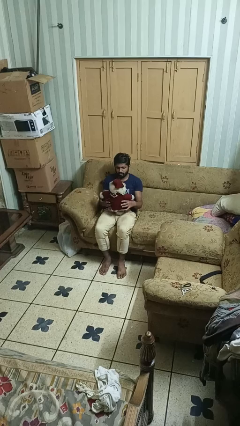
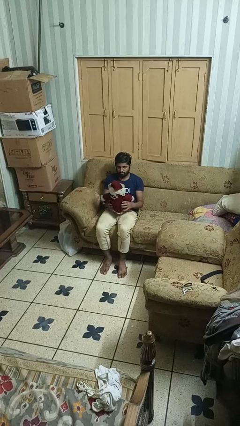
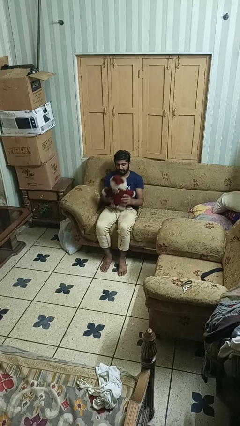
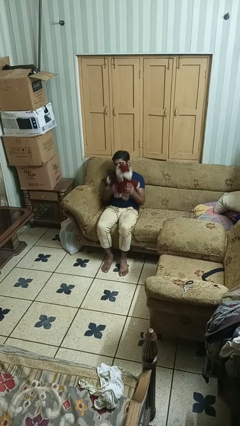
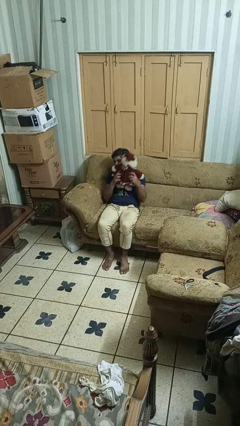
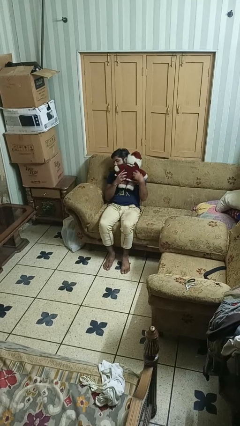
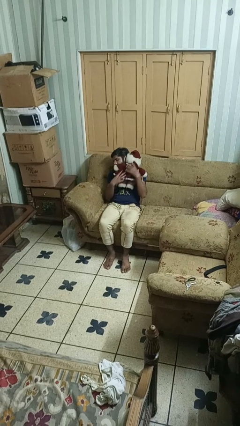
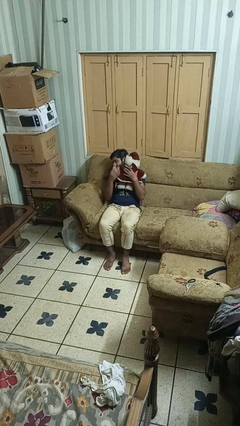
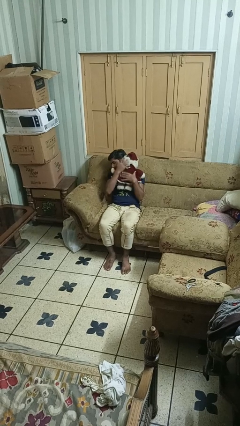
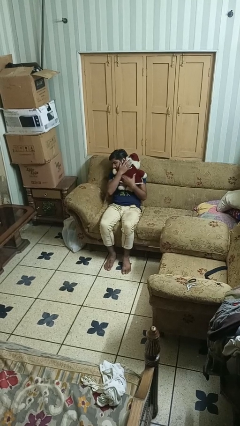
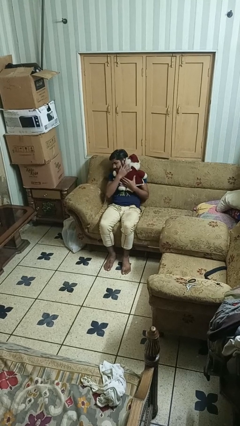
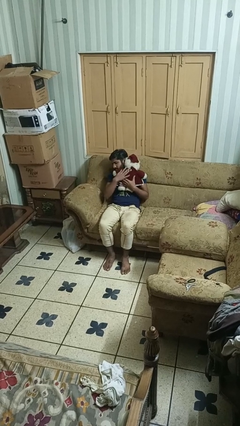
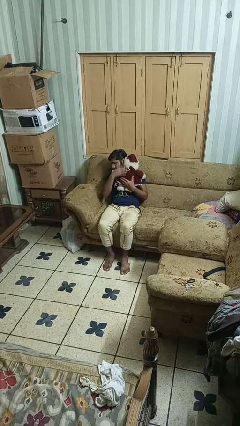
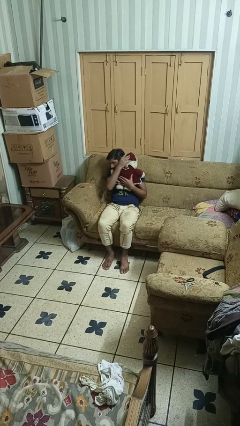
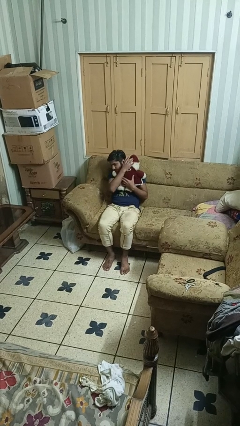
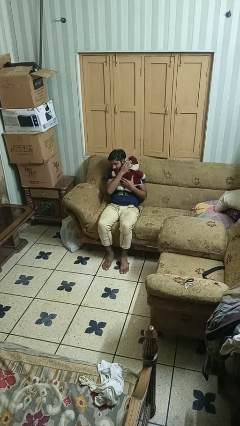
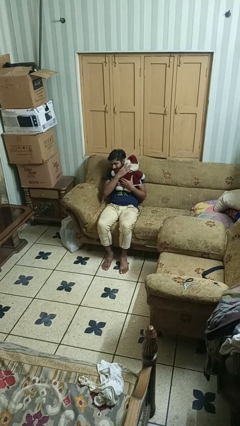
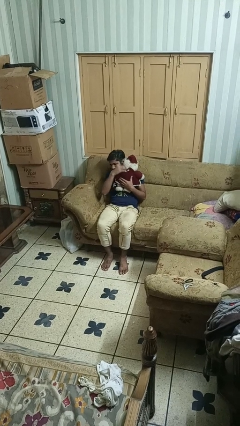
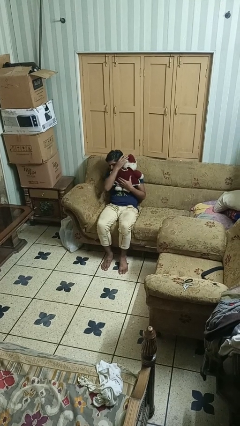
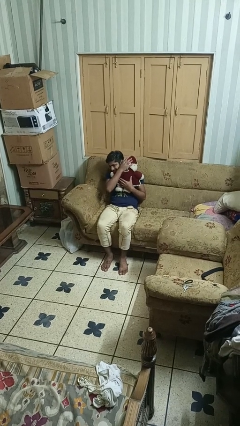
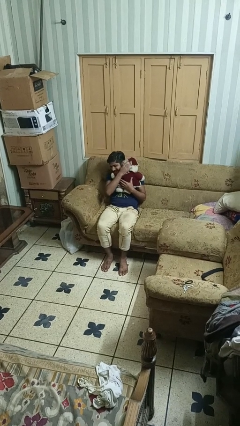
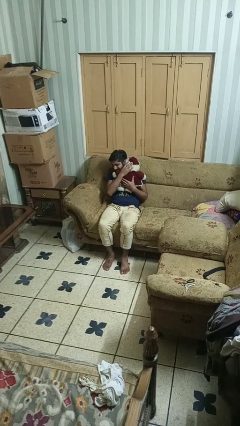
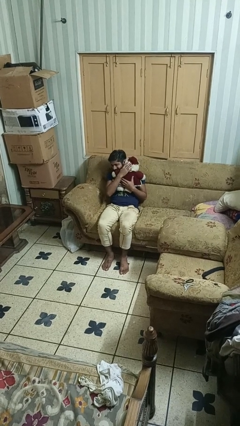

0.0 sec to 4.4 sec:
person hugs stuffed animal

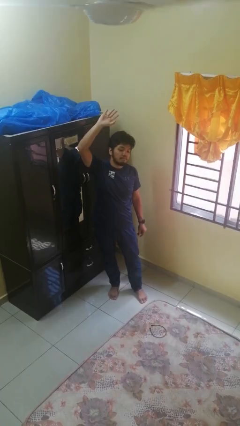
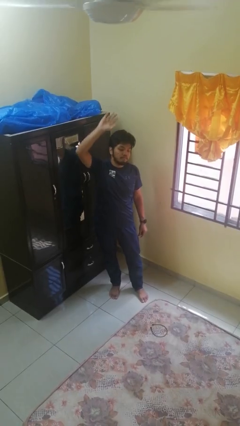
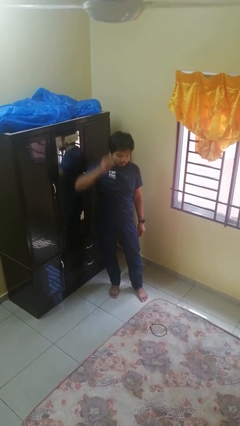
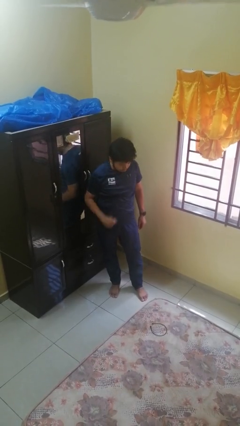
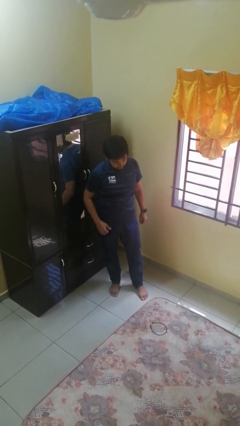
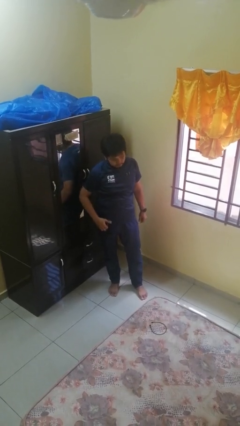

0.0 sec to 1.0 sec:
person gestures lower hand

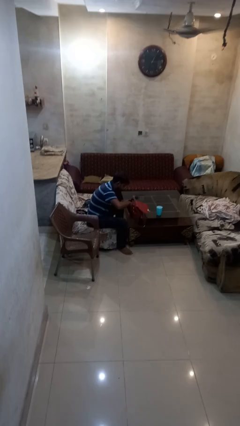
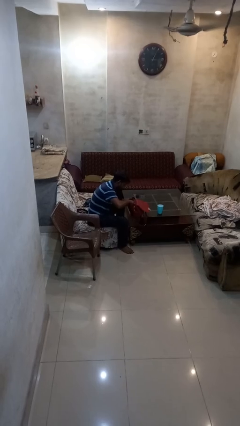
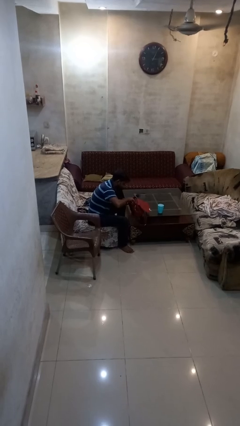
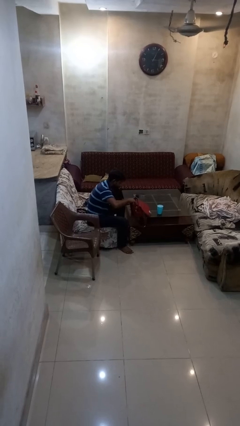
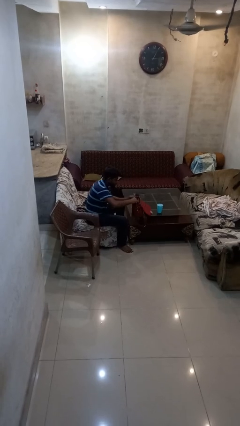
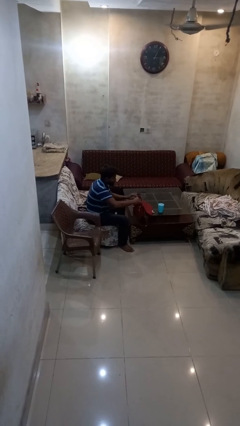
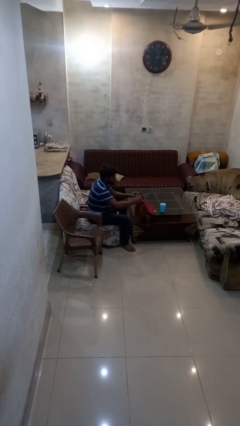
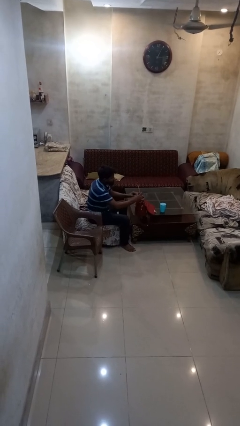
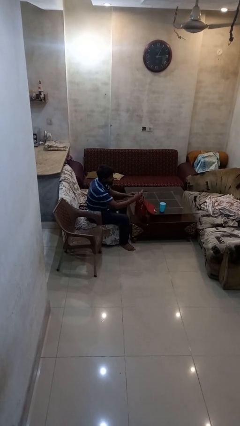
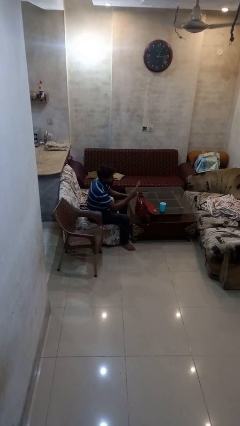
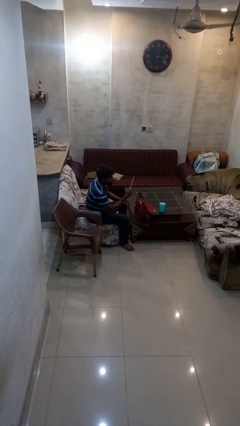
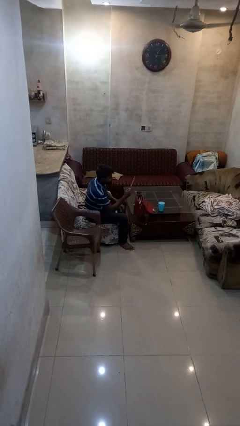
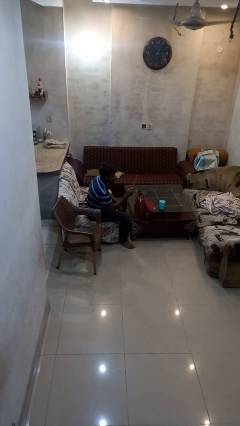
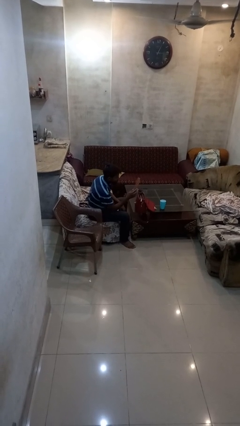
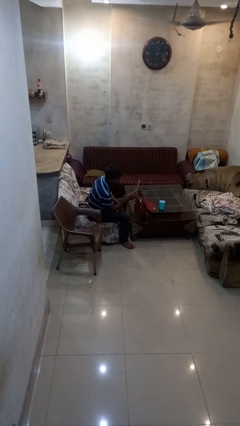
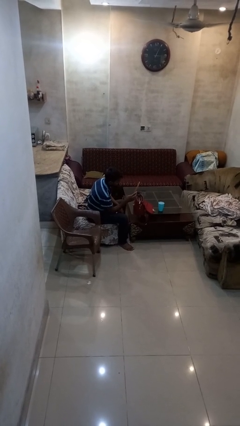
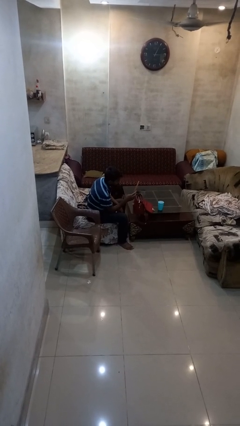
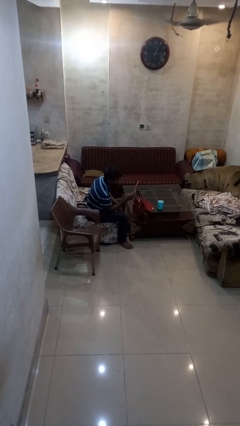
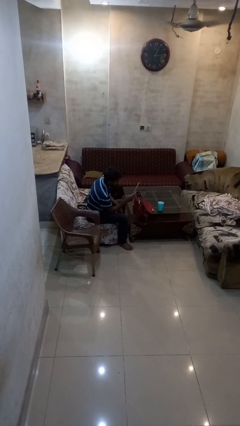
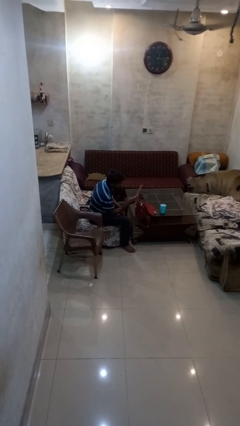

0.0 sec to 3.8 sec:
person takes object from purse

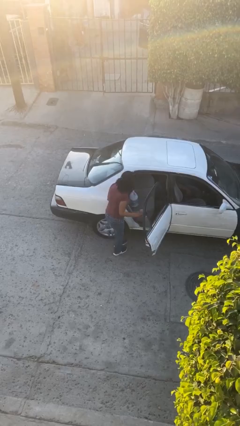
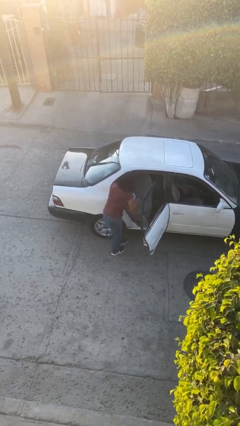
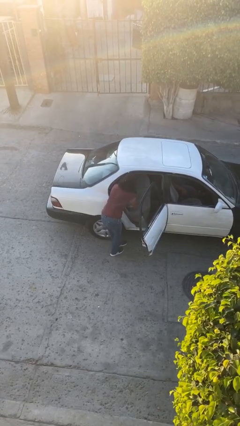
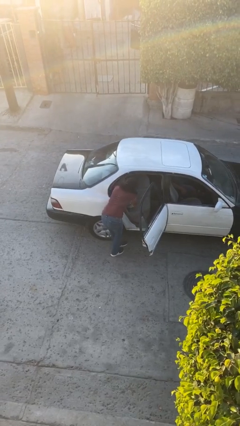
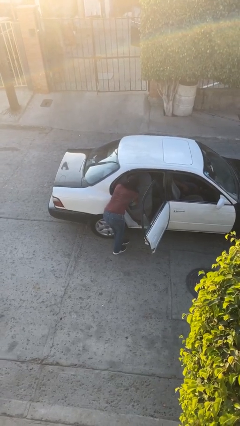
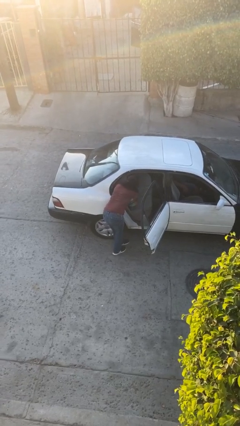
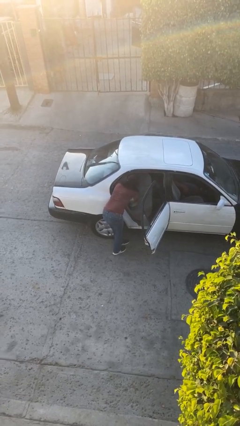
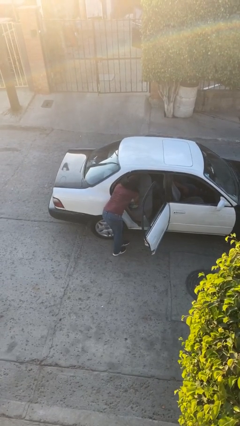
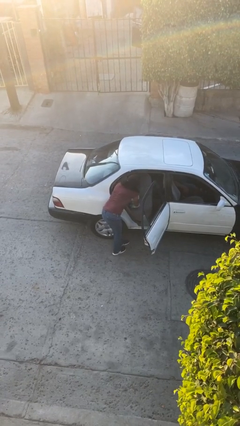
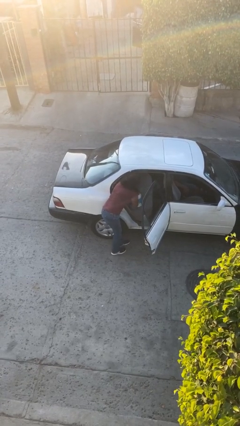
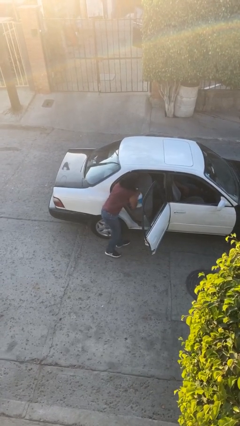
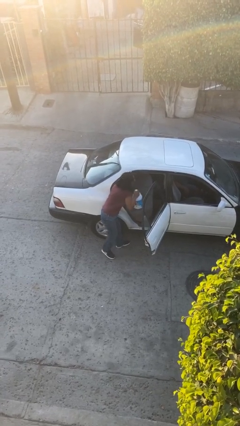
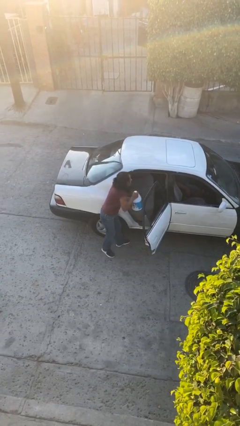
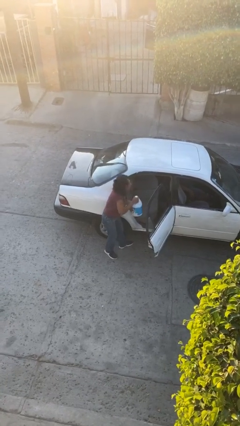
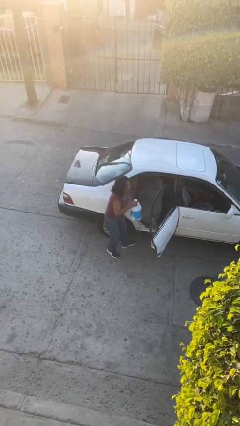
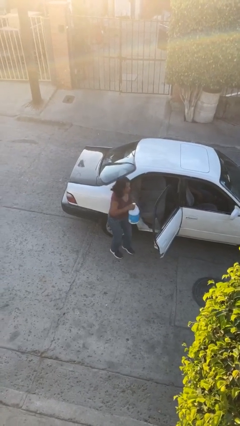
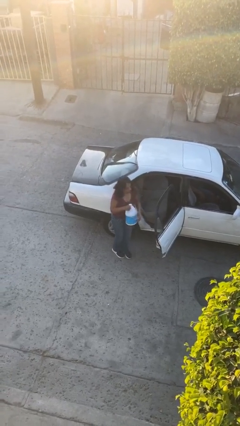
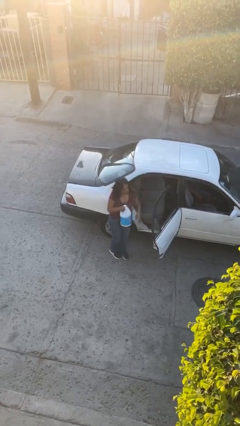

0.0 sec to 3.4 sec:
person unloads car

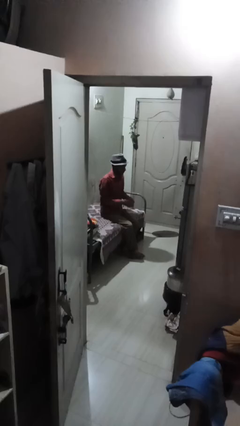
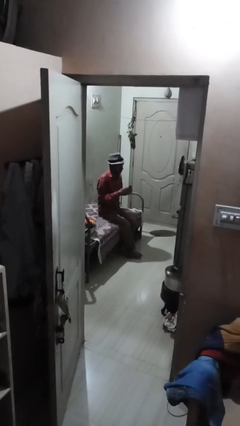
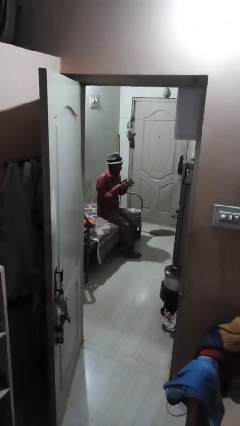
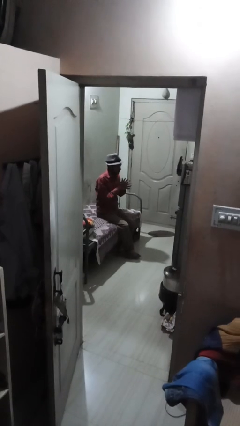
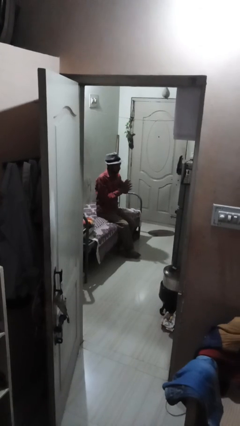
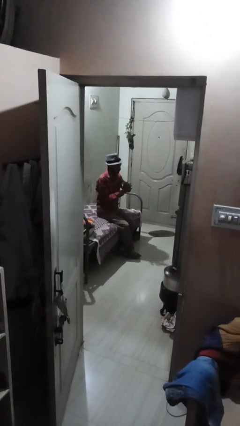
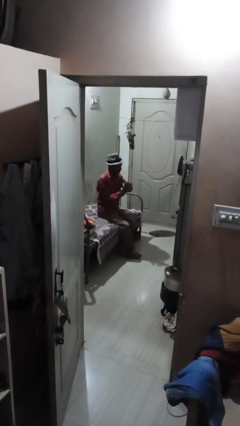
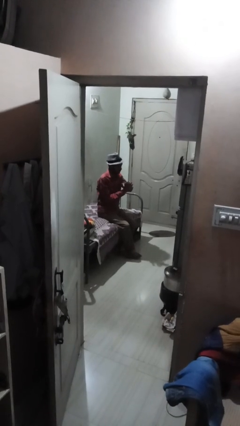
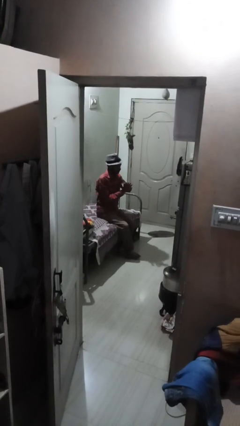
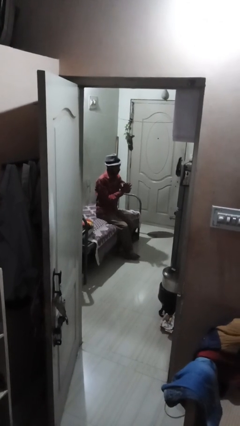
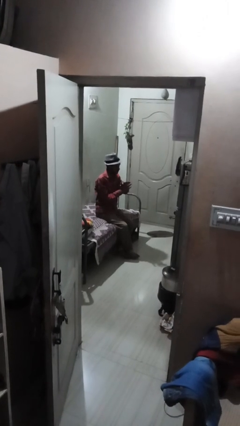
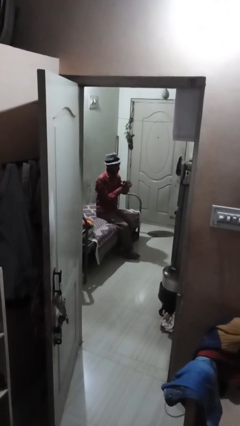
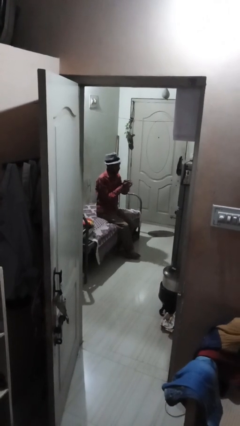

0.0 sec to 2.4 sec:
person cracks knuckles

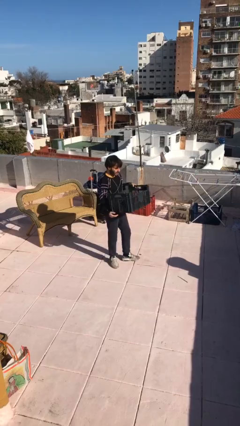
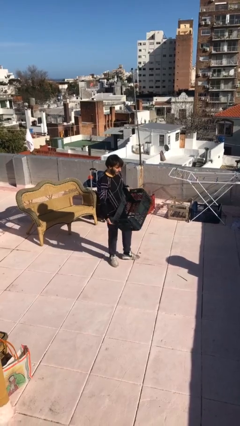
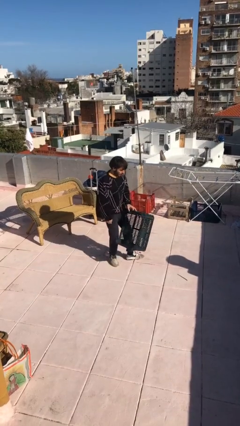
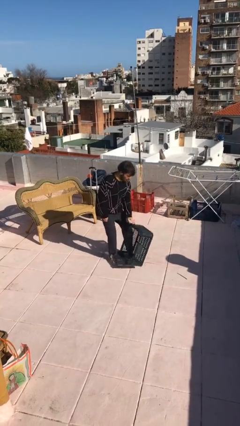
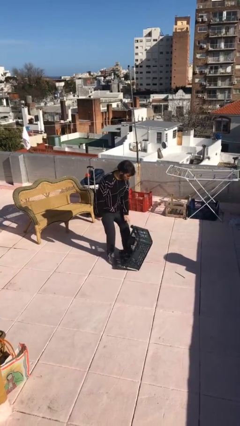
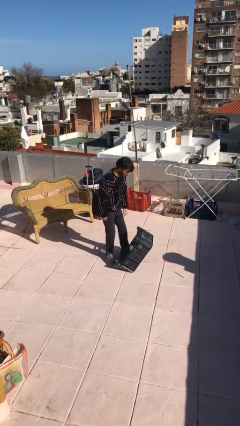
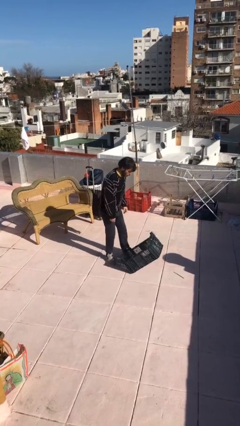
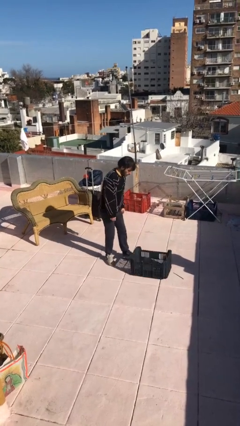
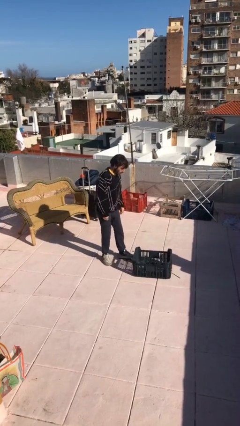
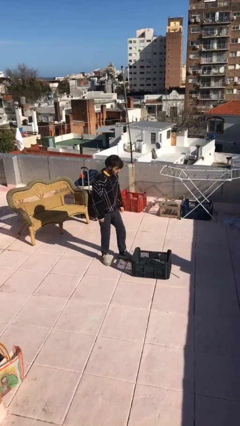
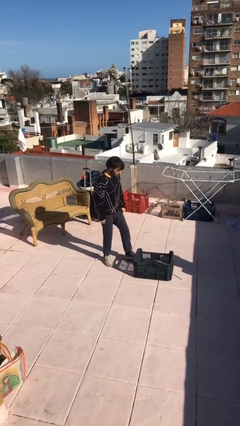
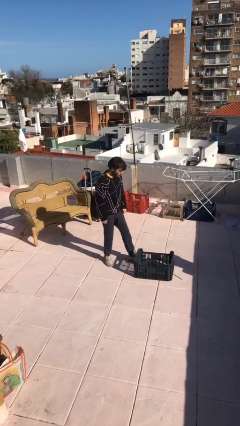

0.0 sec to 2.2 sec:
person drops object

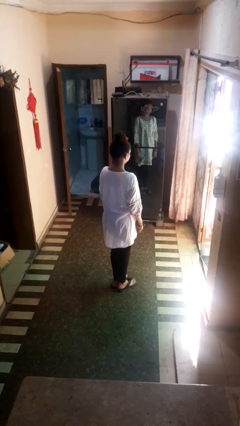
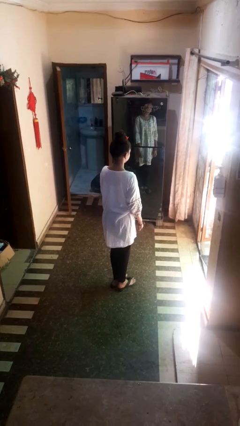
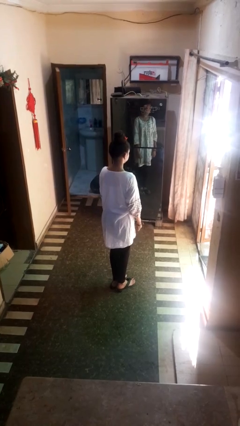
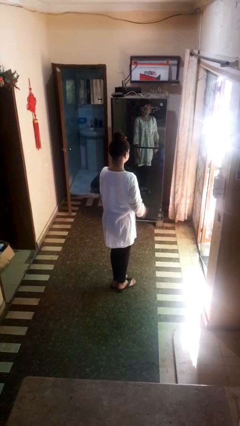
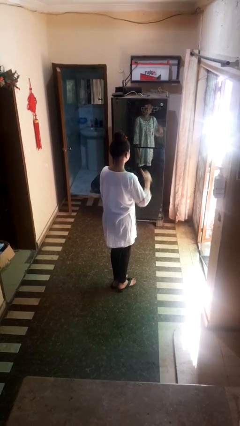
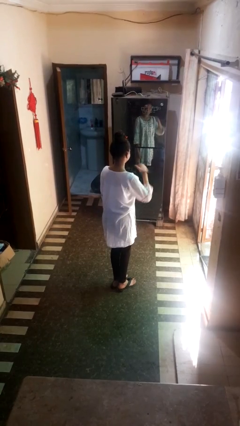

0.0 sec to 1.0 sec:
person gestures behind me
